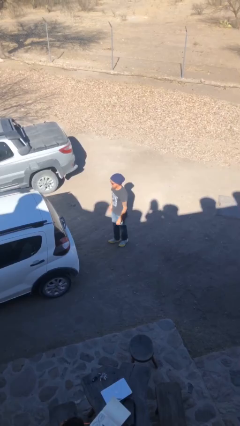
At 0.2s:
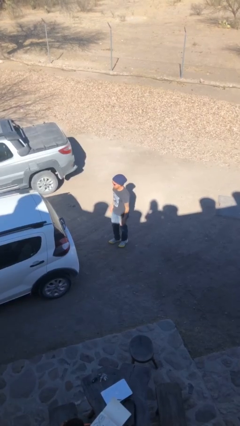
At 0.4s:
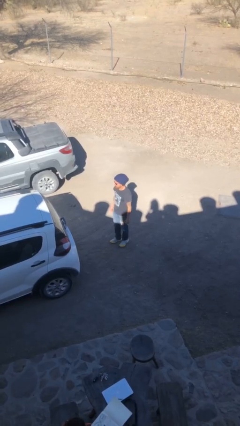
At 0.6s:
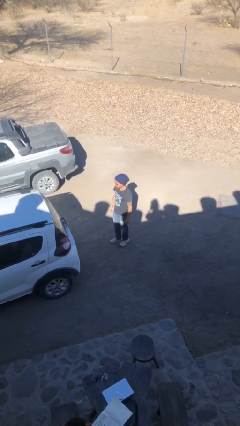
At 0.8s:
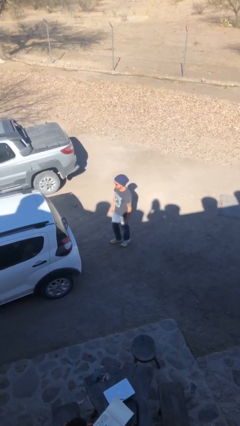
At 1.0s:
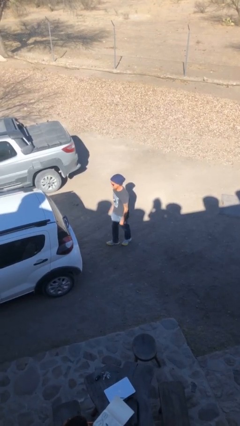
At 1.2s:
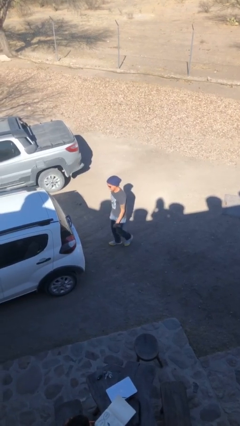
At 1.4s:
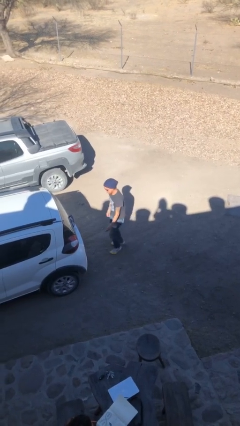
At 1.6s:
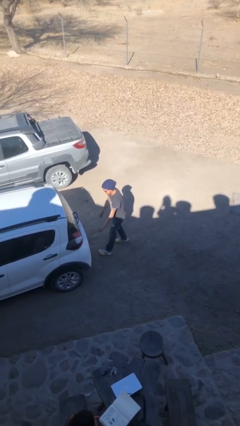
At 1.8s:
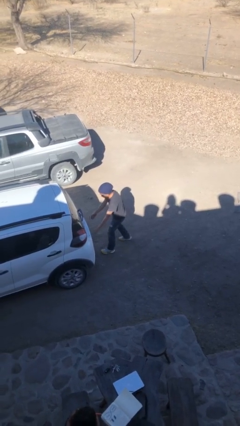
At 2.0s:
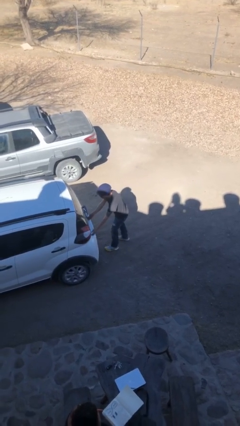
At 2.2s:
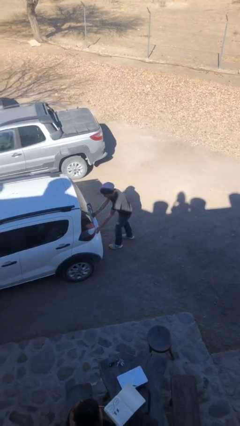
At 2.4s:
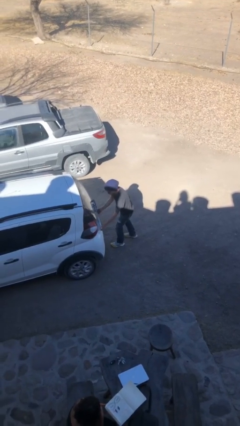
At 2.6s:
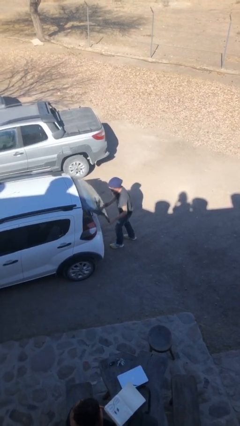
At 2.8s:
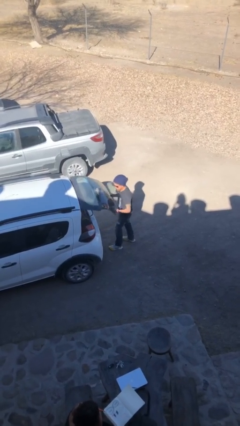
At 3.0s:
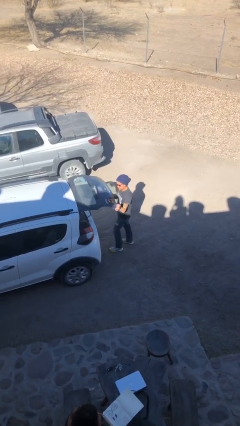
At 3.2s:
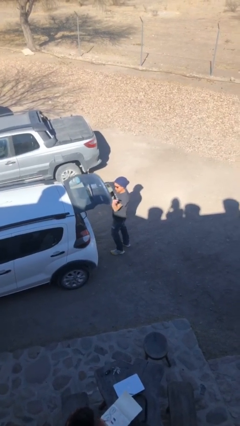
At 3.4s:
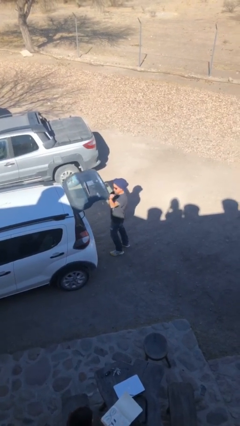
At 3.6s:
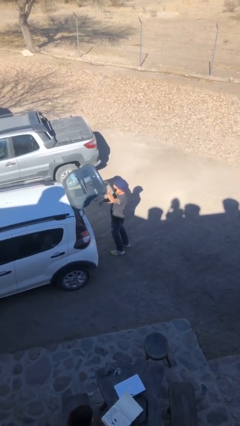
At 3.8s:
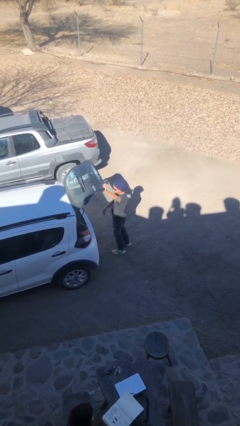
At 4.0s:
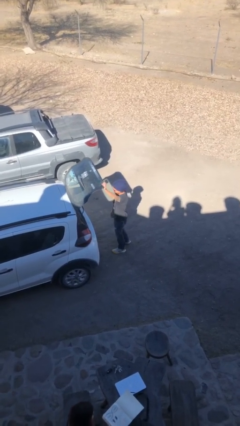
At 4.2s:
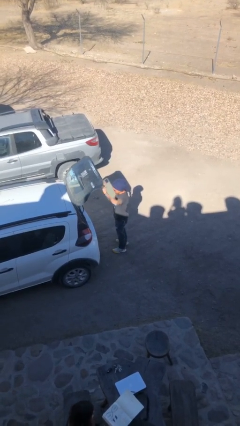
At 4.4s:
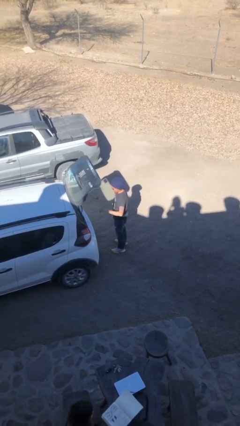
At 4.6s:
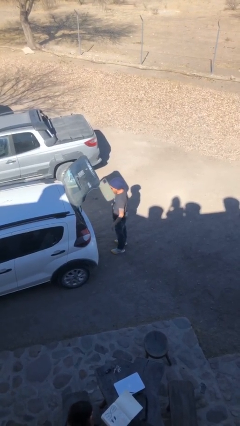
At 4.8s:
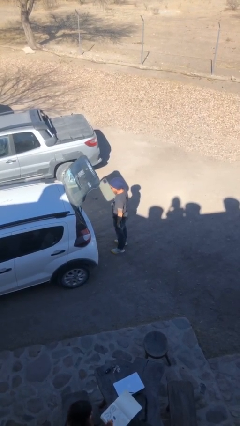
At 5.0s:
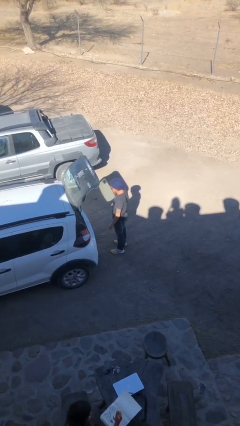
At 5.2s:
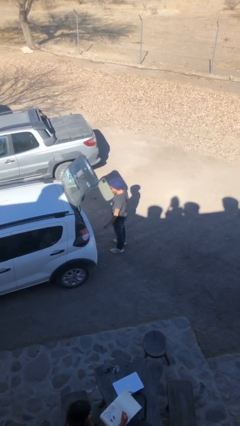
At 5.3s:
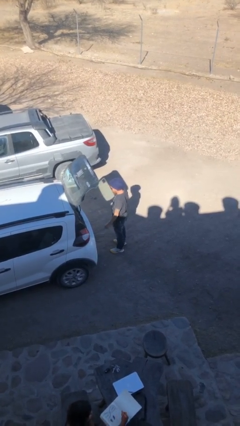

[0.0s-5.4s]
person opens car trunk

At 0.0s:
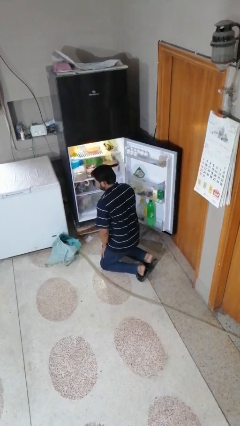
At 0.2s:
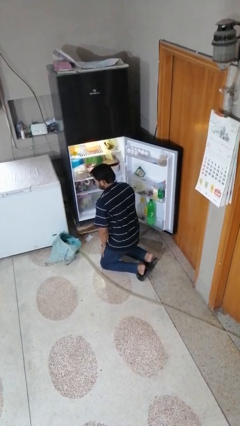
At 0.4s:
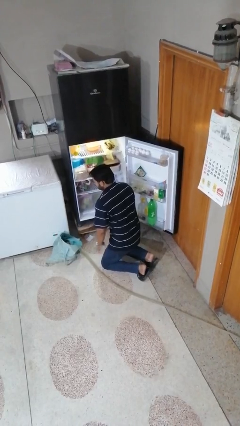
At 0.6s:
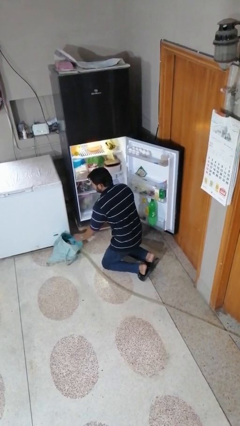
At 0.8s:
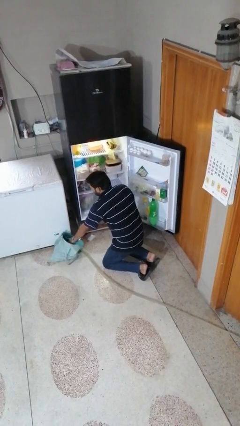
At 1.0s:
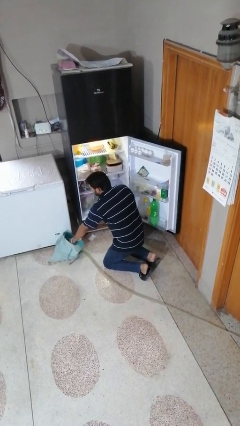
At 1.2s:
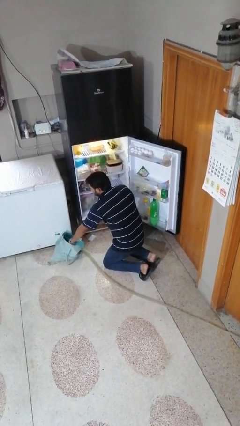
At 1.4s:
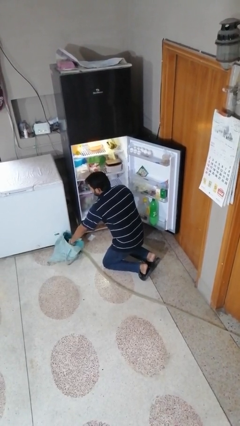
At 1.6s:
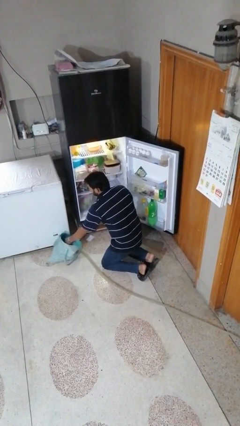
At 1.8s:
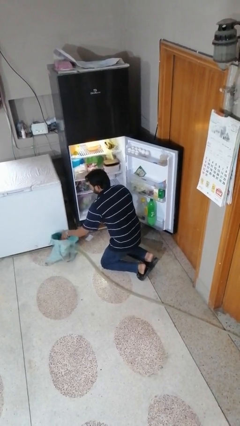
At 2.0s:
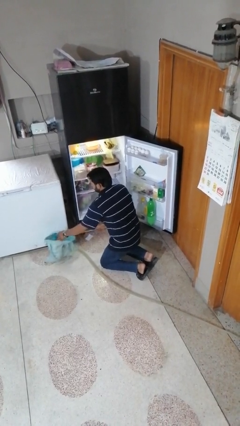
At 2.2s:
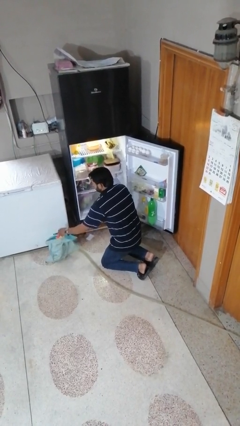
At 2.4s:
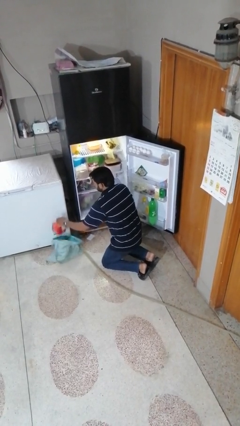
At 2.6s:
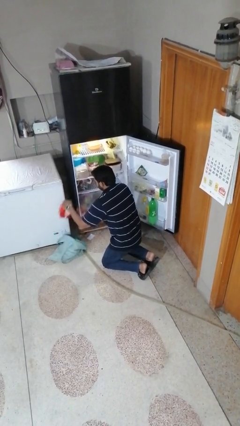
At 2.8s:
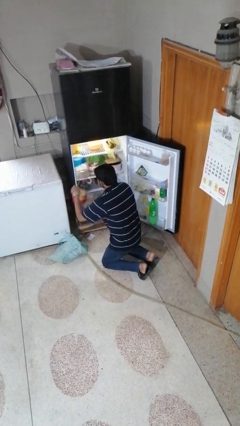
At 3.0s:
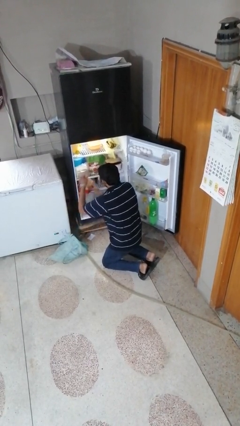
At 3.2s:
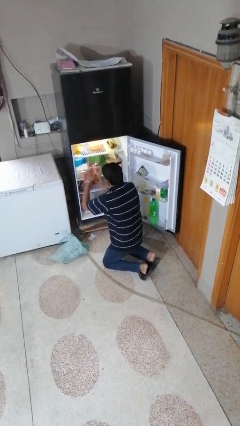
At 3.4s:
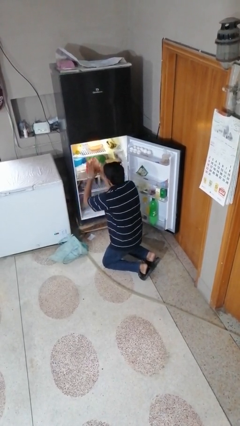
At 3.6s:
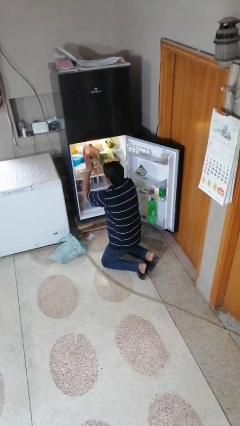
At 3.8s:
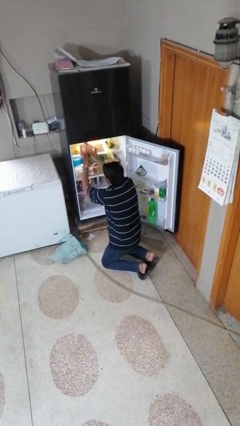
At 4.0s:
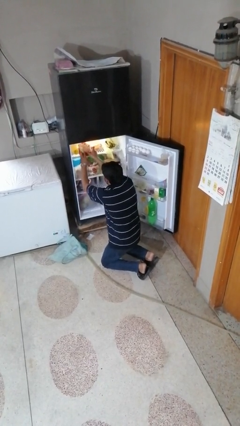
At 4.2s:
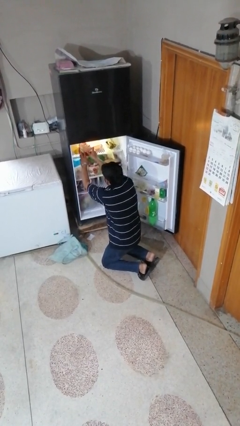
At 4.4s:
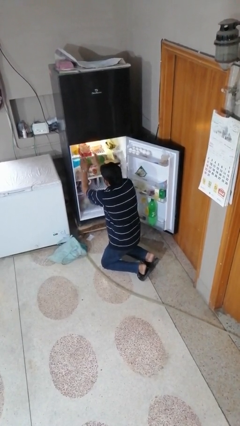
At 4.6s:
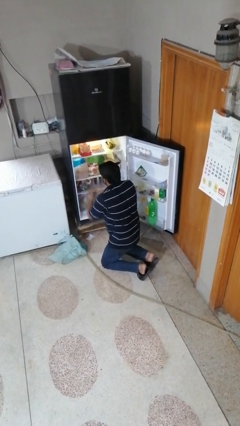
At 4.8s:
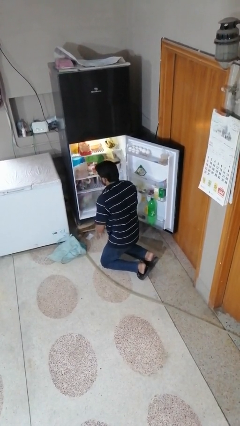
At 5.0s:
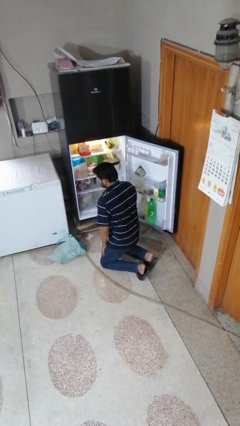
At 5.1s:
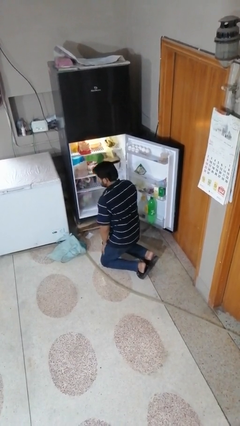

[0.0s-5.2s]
person loads groceries into refrigerator

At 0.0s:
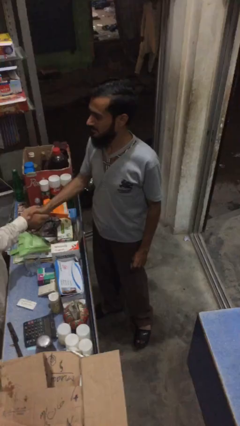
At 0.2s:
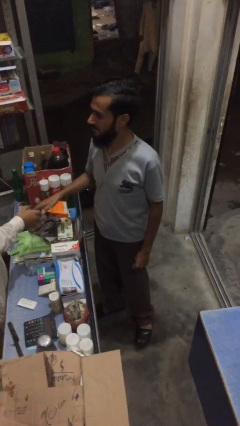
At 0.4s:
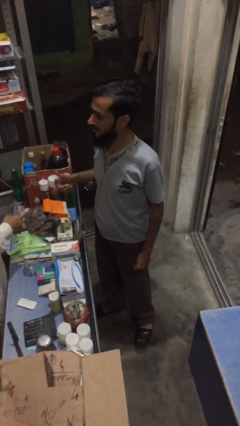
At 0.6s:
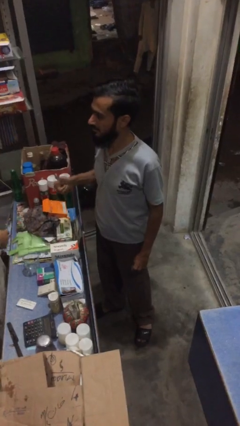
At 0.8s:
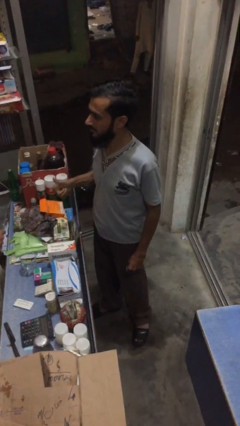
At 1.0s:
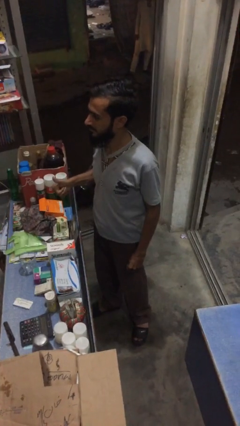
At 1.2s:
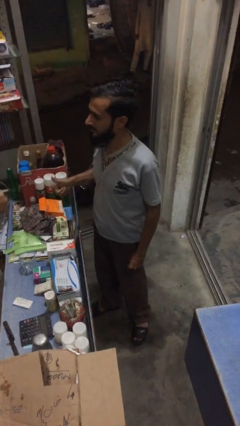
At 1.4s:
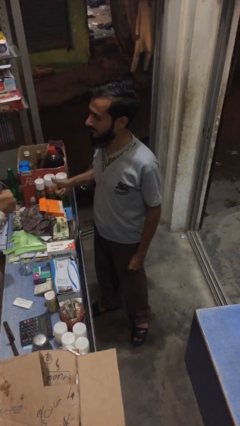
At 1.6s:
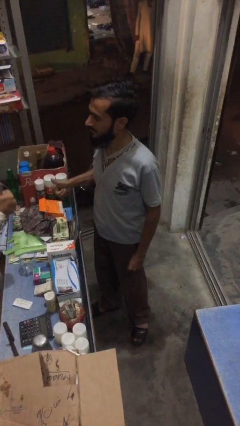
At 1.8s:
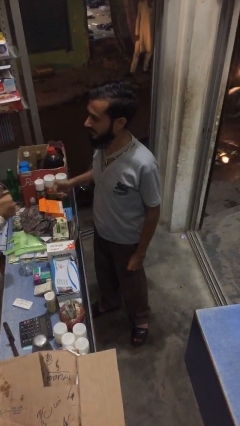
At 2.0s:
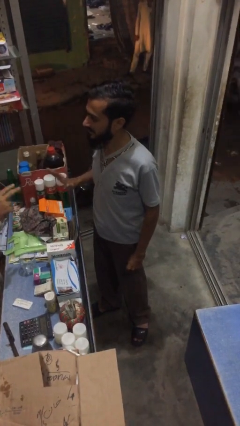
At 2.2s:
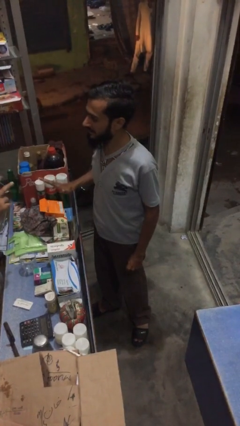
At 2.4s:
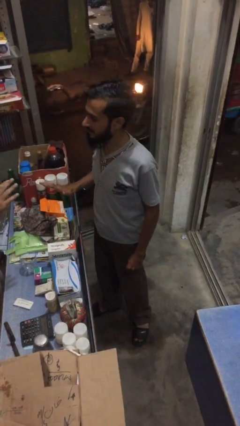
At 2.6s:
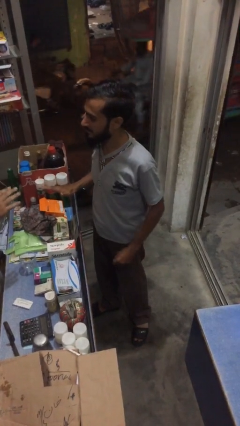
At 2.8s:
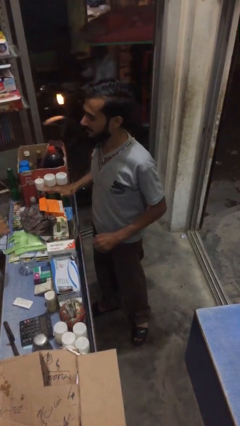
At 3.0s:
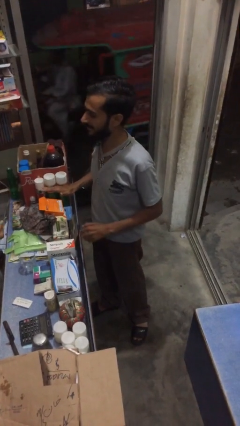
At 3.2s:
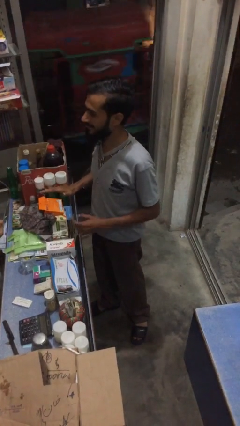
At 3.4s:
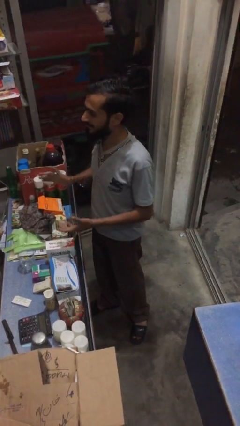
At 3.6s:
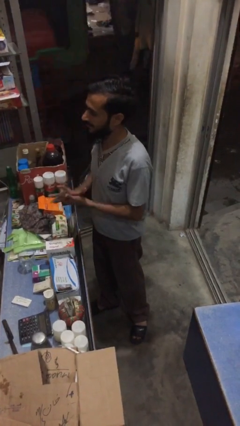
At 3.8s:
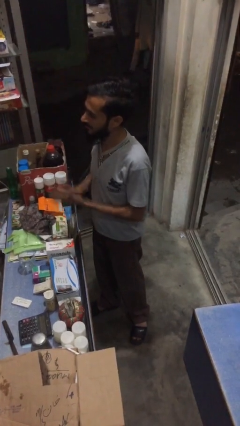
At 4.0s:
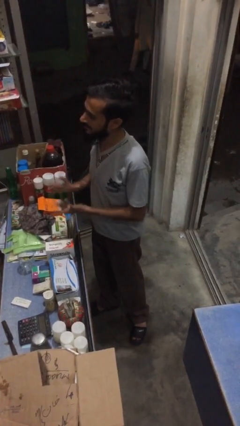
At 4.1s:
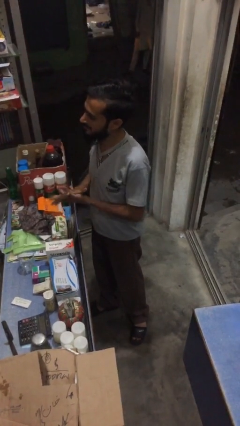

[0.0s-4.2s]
person talks to person

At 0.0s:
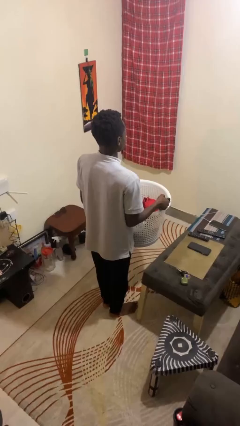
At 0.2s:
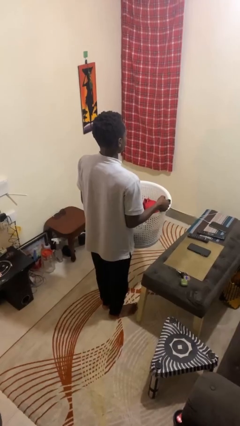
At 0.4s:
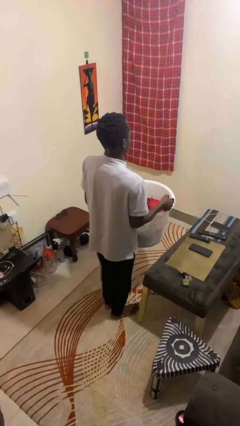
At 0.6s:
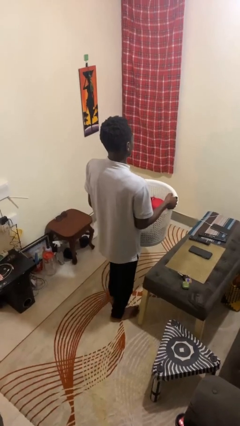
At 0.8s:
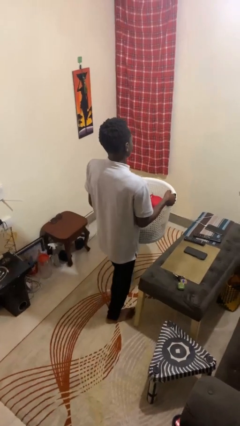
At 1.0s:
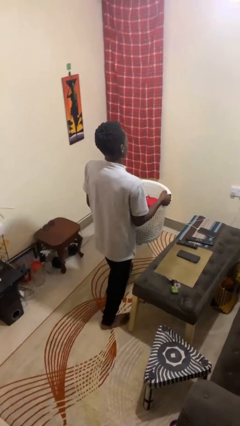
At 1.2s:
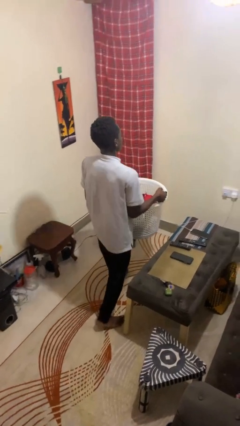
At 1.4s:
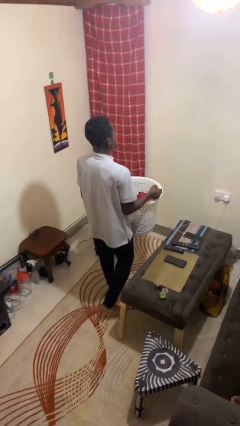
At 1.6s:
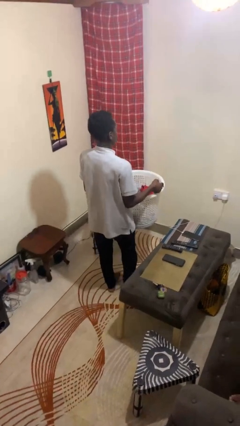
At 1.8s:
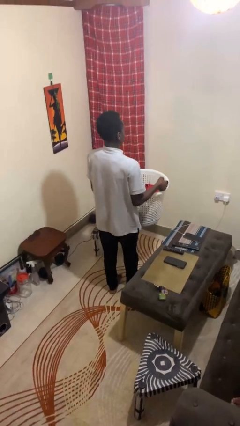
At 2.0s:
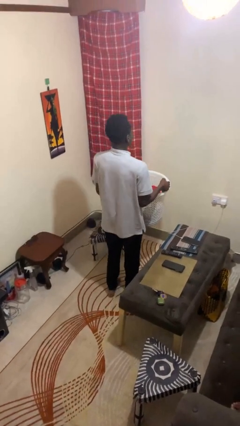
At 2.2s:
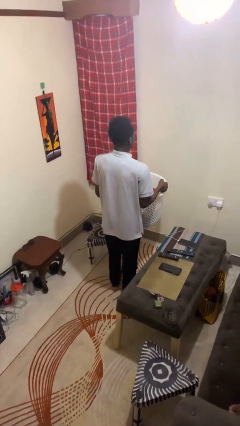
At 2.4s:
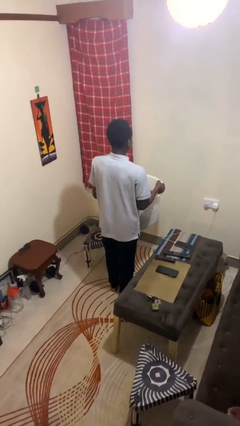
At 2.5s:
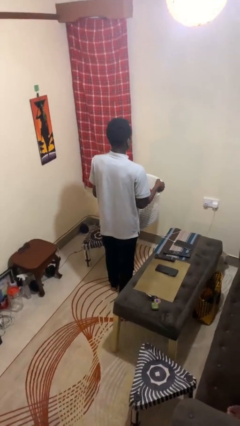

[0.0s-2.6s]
person carries laundry basket

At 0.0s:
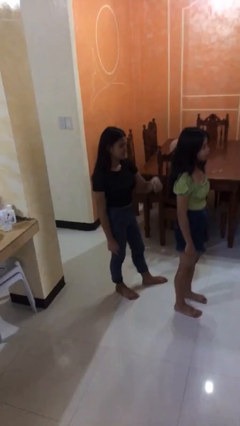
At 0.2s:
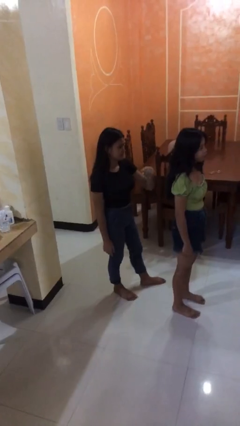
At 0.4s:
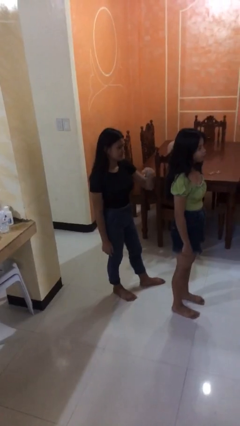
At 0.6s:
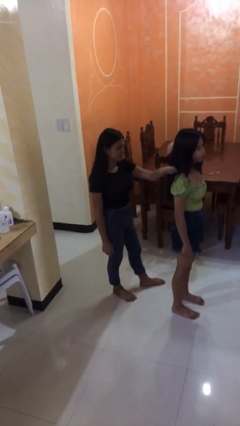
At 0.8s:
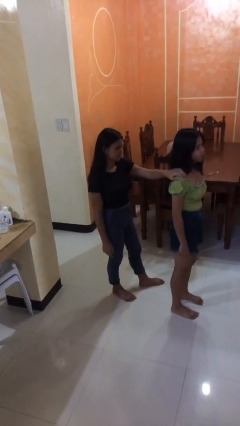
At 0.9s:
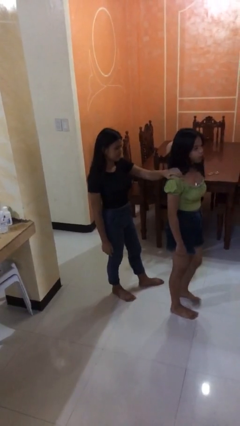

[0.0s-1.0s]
person grabs person by shoulder
